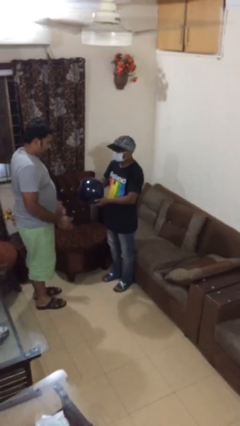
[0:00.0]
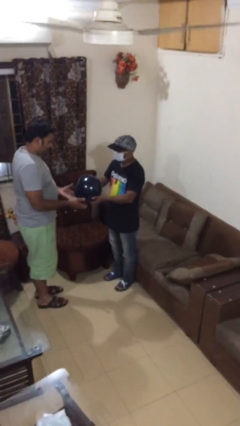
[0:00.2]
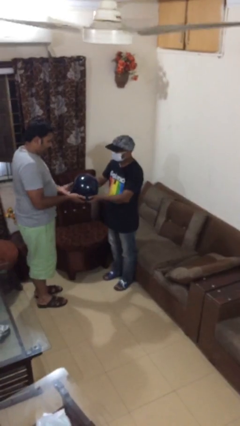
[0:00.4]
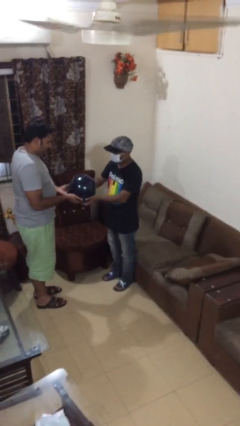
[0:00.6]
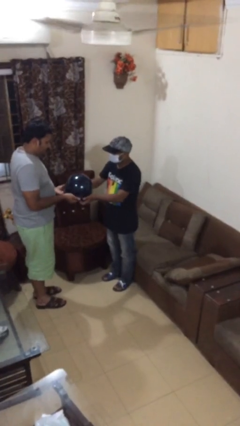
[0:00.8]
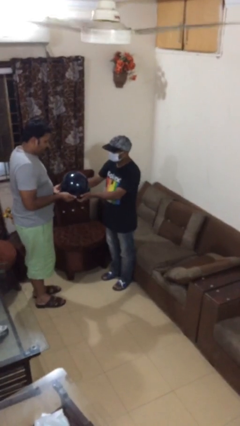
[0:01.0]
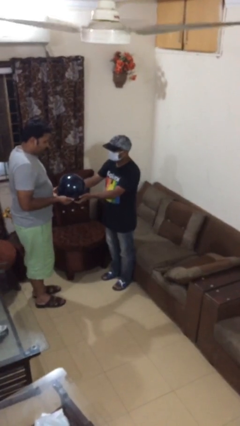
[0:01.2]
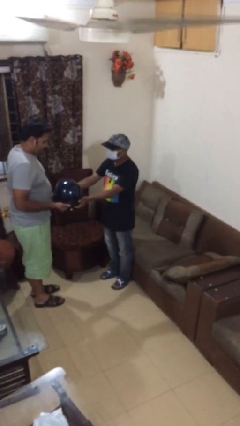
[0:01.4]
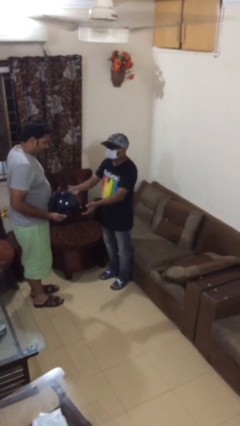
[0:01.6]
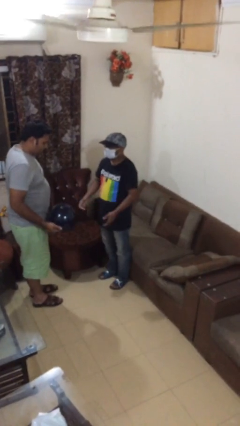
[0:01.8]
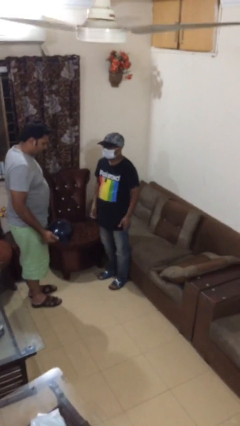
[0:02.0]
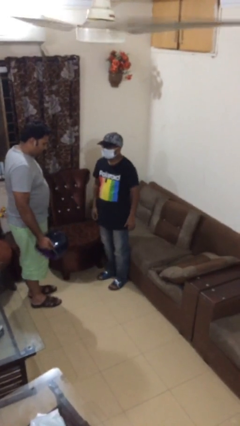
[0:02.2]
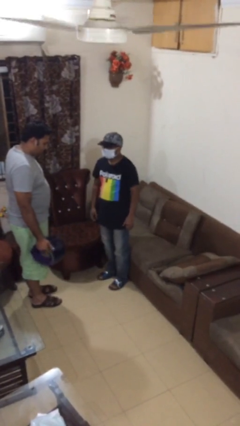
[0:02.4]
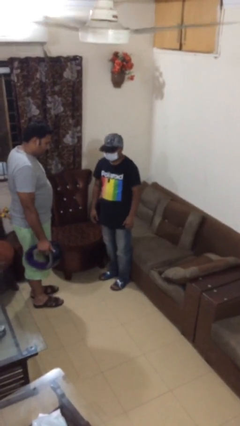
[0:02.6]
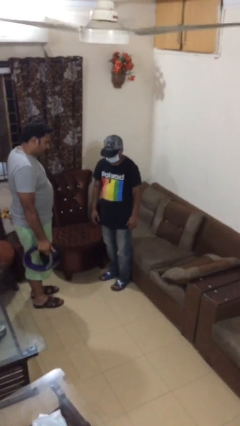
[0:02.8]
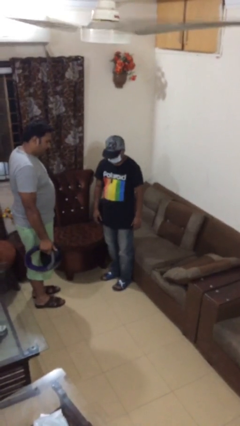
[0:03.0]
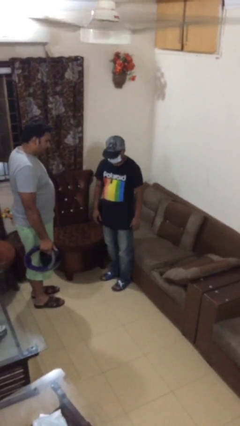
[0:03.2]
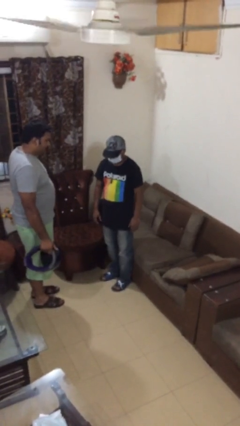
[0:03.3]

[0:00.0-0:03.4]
person transfers object to person

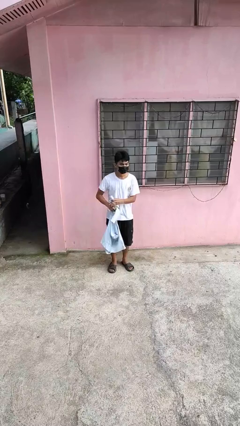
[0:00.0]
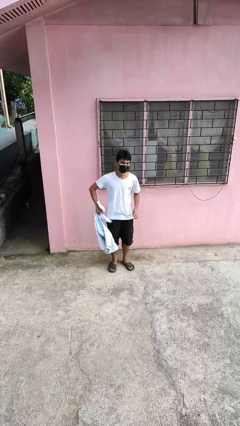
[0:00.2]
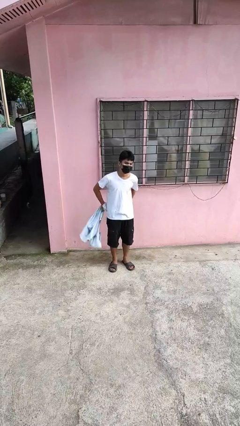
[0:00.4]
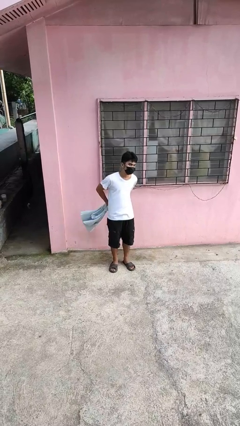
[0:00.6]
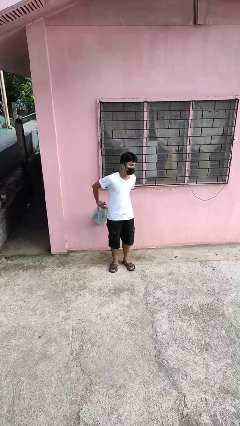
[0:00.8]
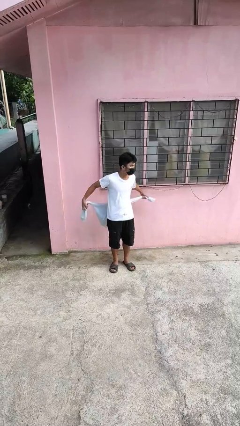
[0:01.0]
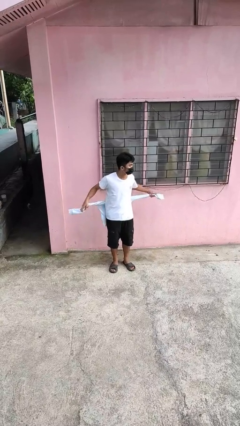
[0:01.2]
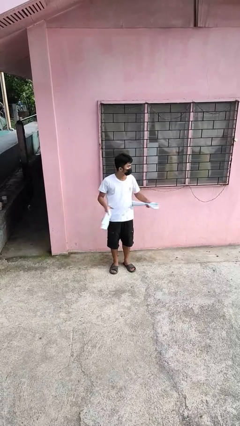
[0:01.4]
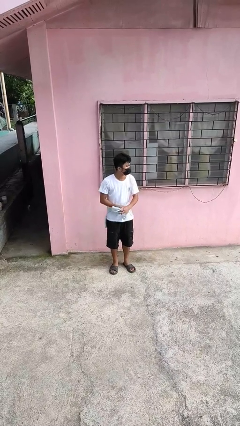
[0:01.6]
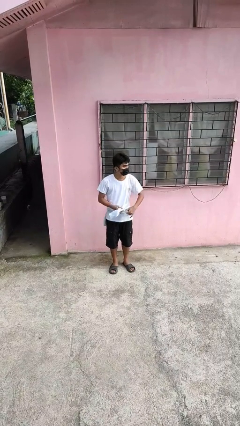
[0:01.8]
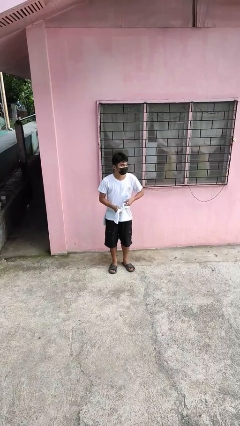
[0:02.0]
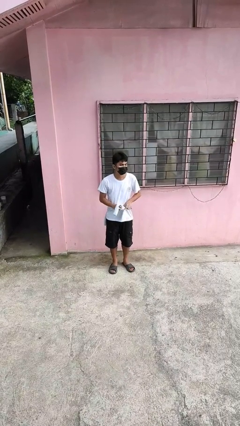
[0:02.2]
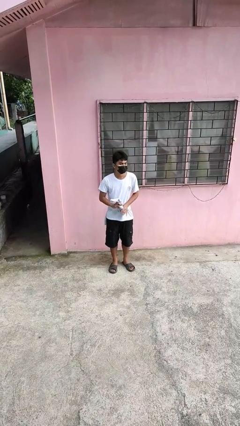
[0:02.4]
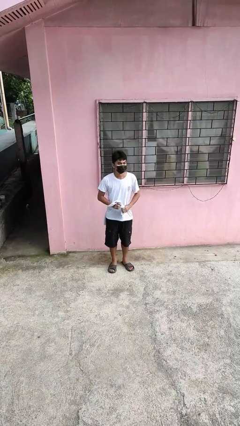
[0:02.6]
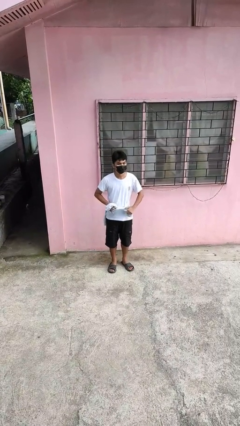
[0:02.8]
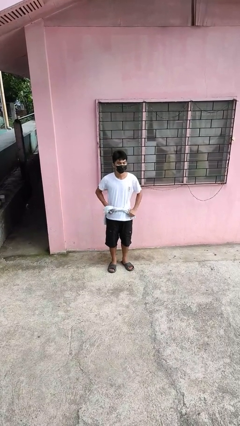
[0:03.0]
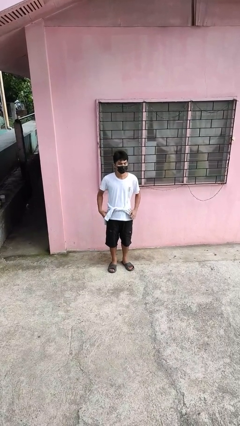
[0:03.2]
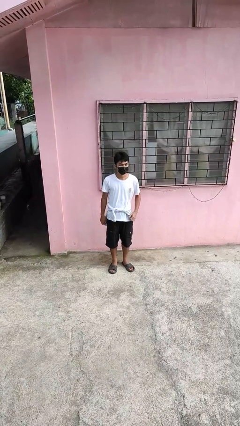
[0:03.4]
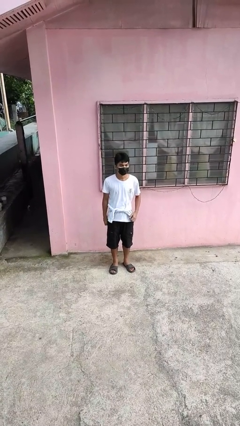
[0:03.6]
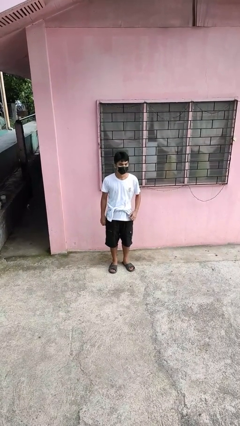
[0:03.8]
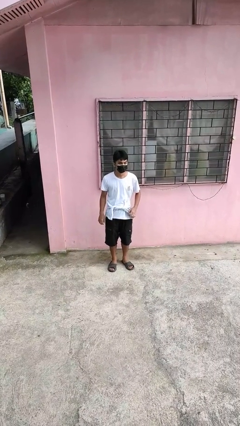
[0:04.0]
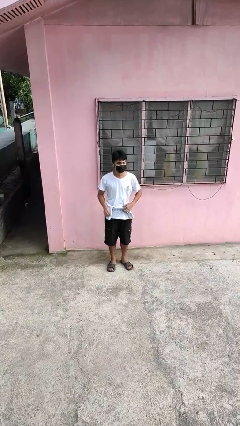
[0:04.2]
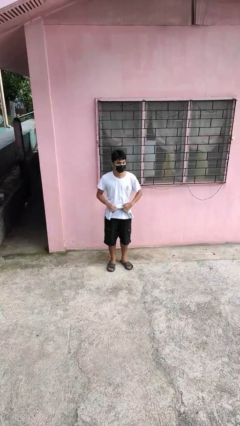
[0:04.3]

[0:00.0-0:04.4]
person ties jacket around waist

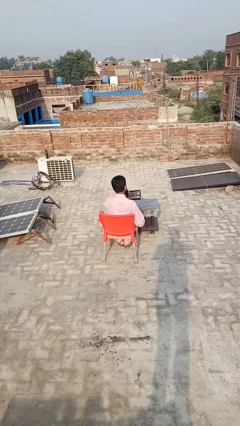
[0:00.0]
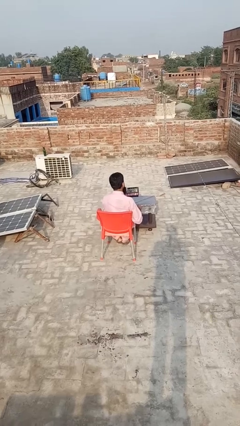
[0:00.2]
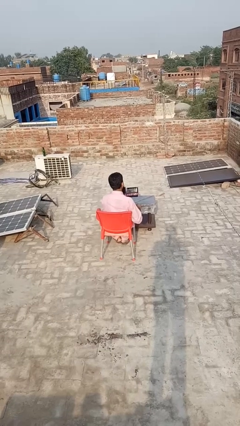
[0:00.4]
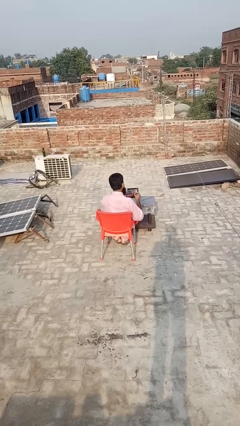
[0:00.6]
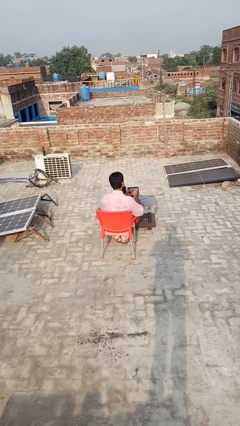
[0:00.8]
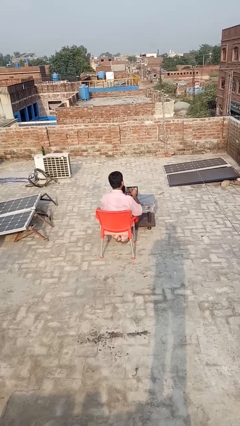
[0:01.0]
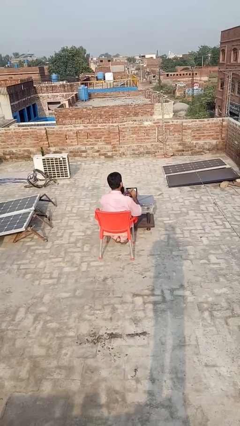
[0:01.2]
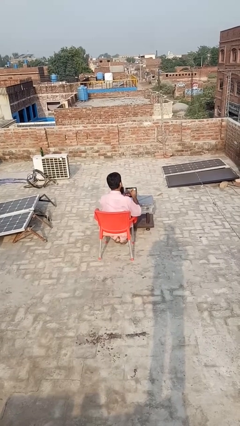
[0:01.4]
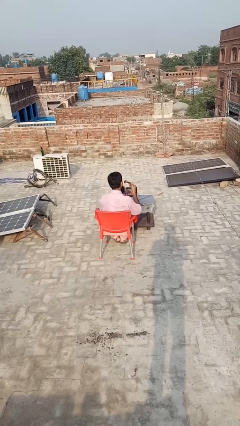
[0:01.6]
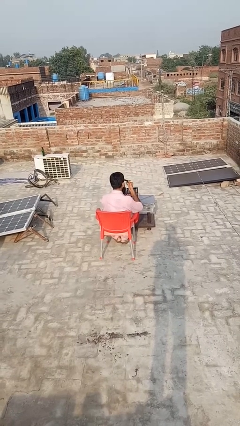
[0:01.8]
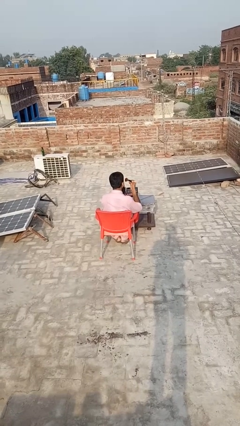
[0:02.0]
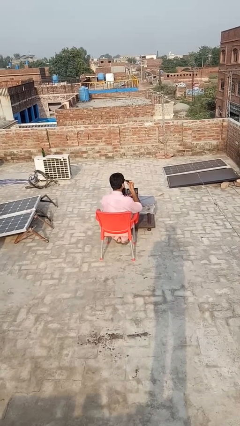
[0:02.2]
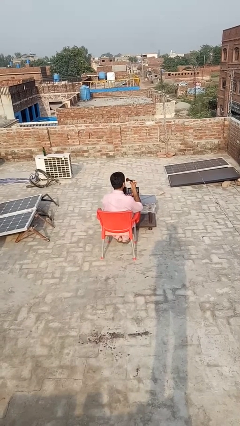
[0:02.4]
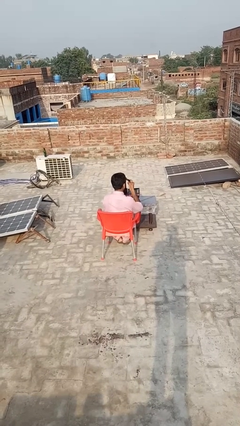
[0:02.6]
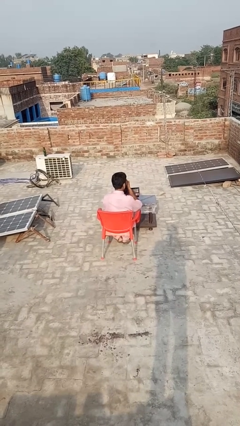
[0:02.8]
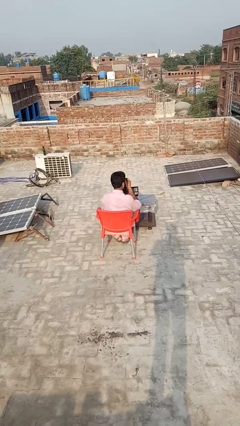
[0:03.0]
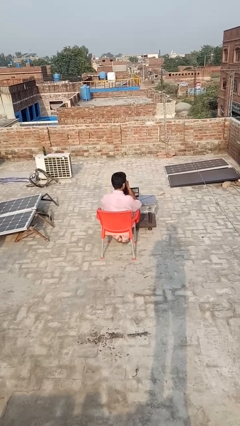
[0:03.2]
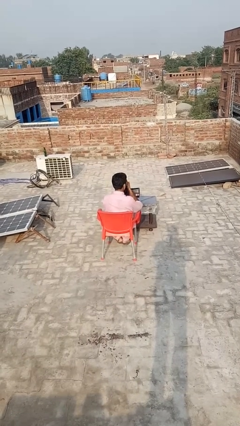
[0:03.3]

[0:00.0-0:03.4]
person applies eye makeup

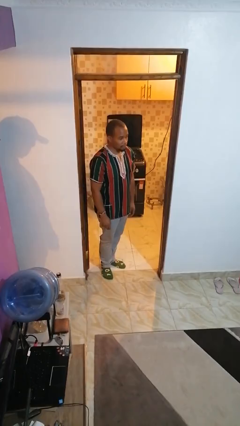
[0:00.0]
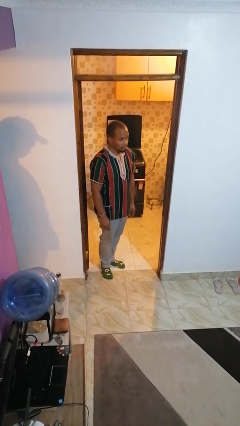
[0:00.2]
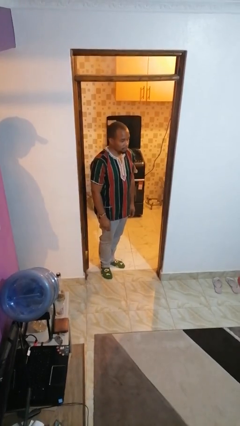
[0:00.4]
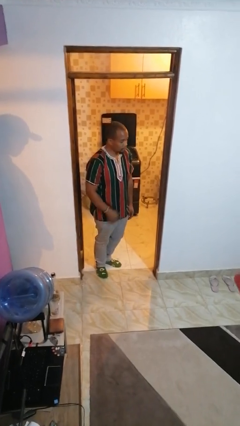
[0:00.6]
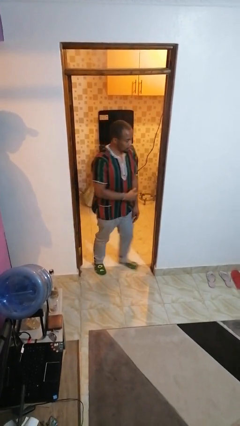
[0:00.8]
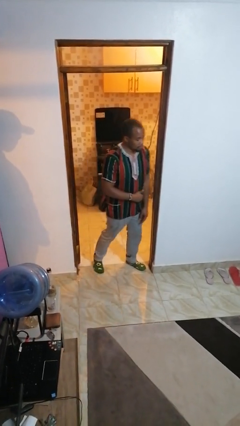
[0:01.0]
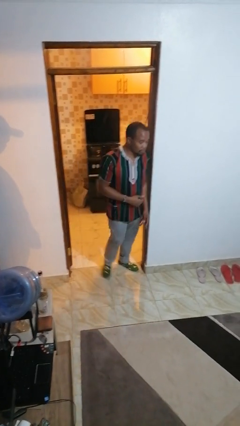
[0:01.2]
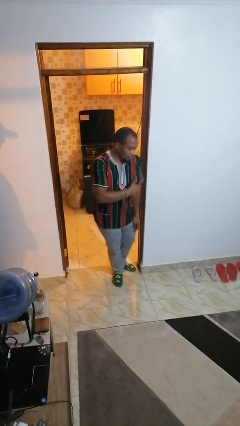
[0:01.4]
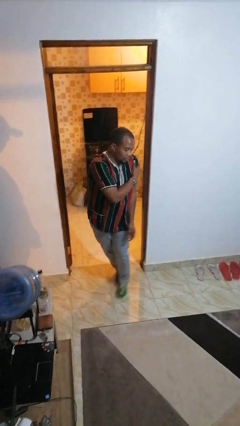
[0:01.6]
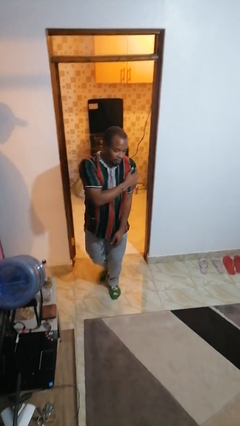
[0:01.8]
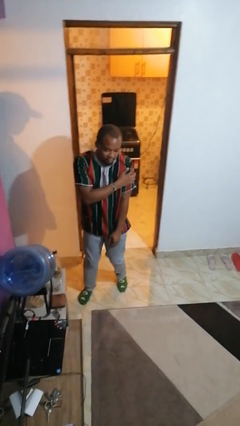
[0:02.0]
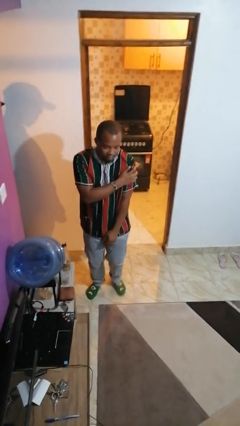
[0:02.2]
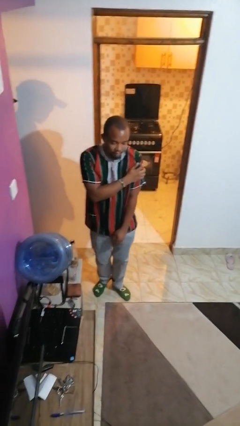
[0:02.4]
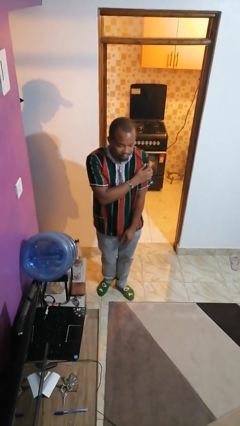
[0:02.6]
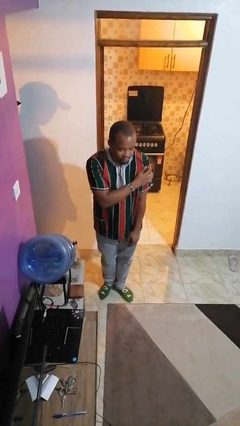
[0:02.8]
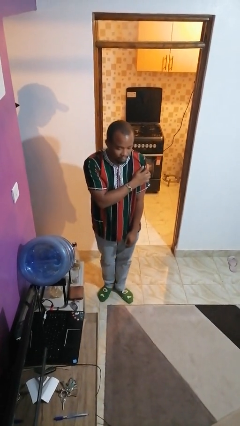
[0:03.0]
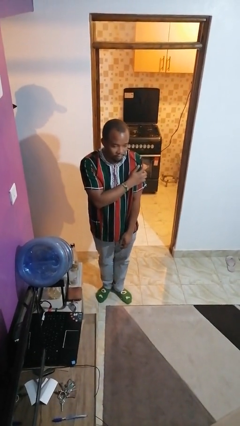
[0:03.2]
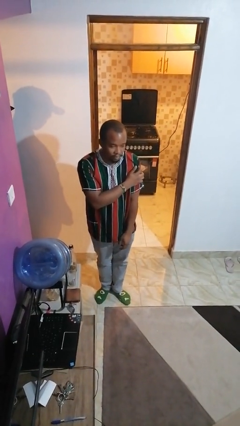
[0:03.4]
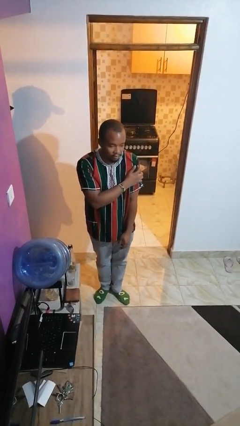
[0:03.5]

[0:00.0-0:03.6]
person bumps into wall

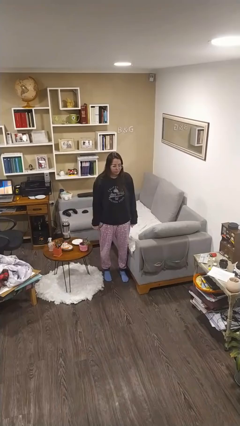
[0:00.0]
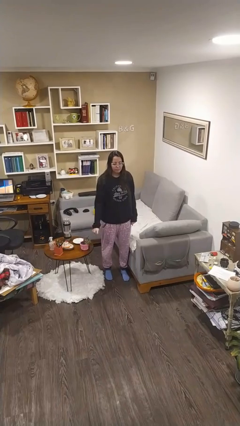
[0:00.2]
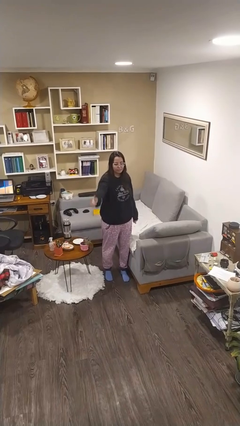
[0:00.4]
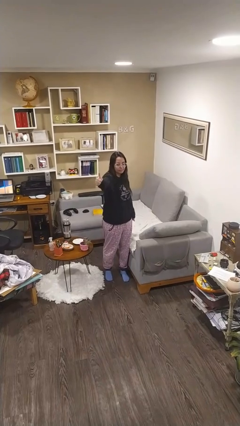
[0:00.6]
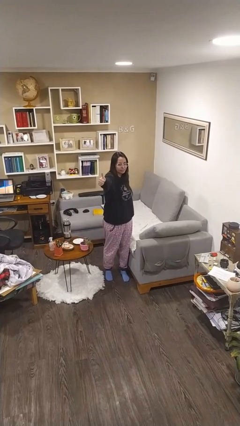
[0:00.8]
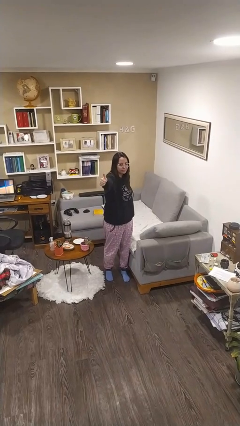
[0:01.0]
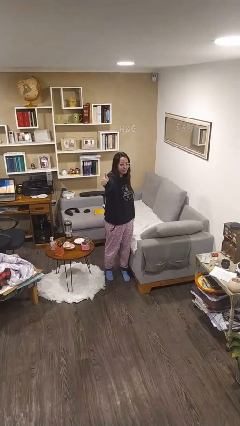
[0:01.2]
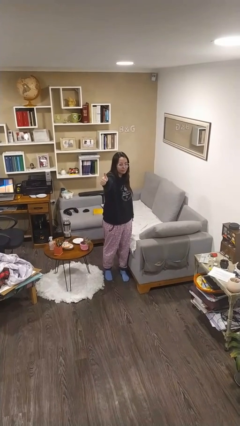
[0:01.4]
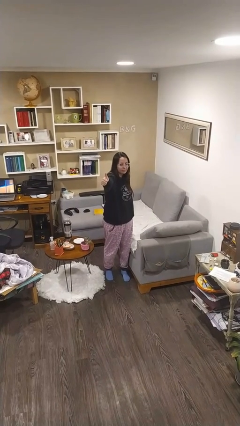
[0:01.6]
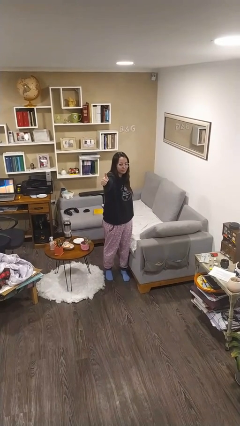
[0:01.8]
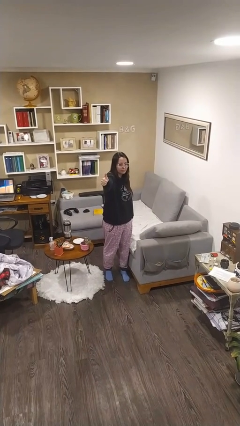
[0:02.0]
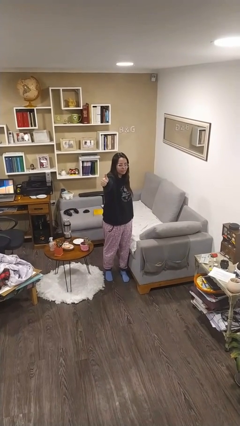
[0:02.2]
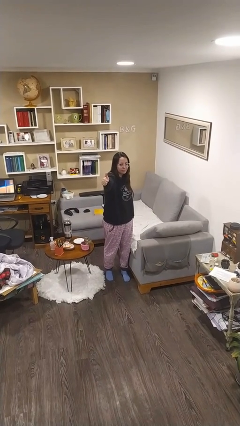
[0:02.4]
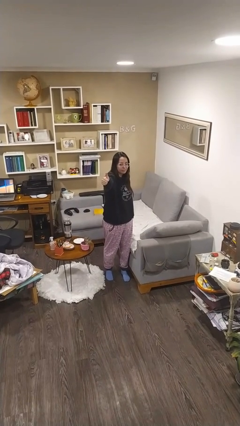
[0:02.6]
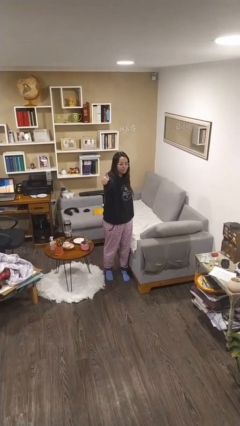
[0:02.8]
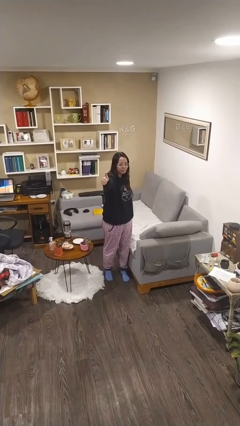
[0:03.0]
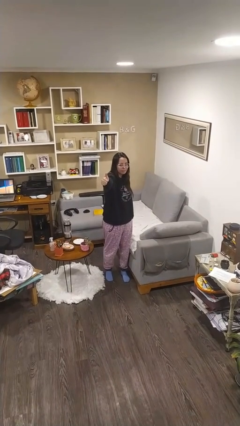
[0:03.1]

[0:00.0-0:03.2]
person gestures thumbs up
